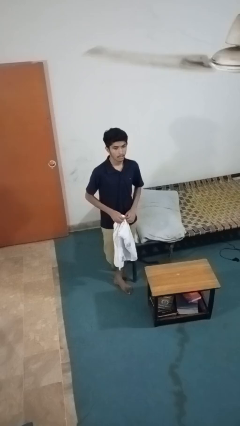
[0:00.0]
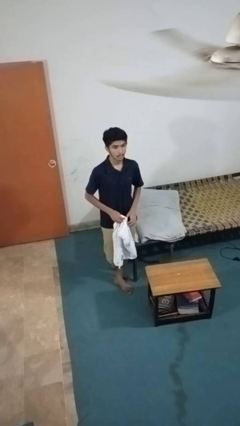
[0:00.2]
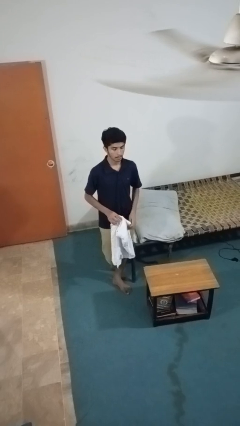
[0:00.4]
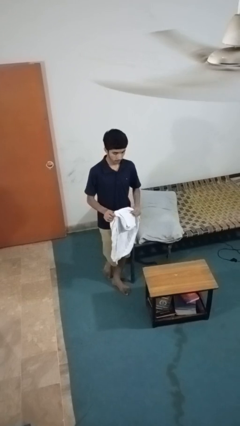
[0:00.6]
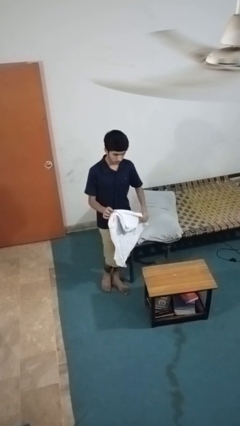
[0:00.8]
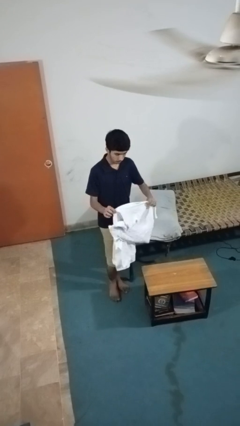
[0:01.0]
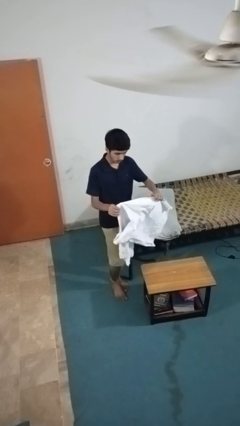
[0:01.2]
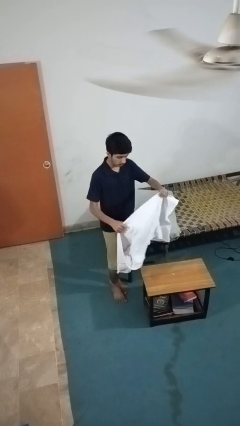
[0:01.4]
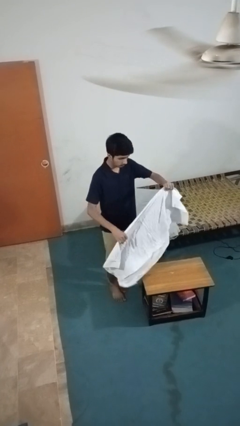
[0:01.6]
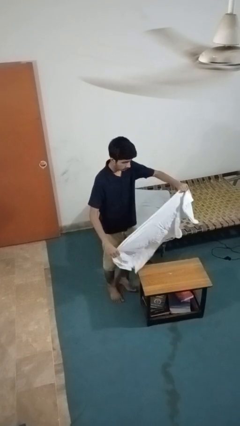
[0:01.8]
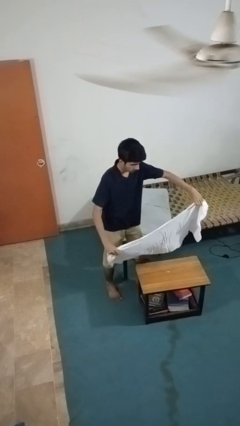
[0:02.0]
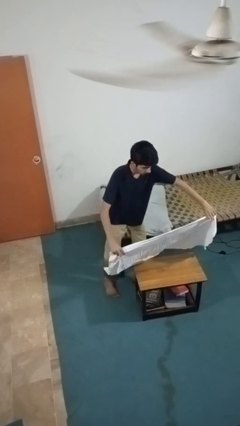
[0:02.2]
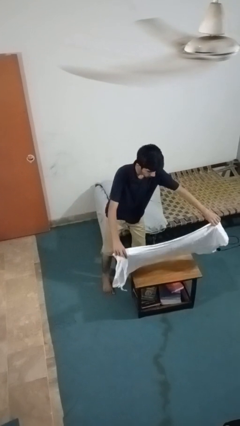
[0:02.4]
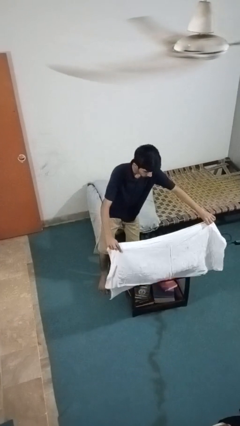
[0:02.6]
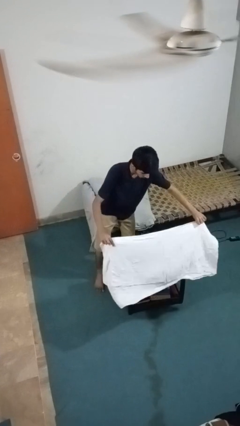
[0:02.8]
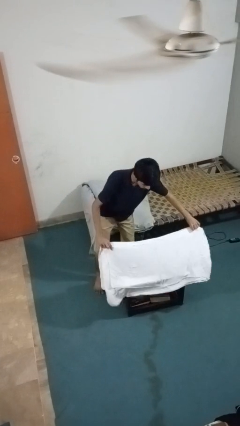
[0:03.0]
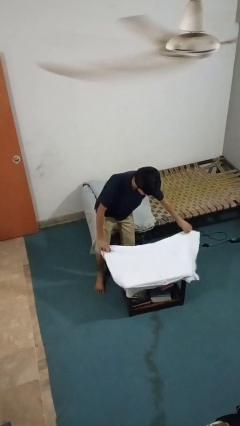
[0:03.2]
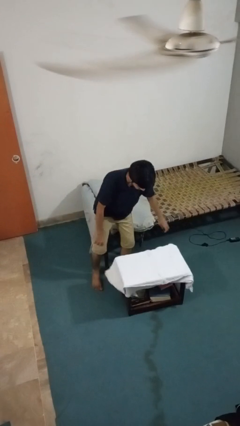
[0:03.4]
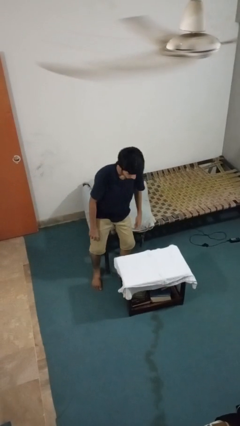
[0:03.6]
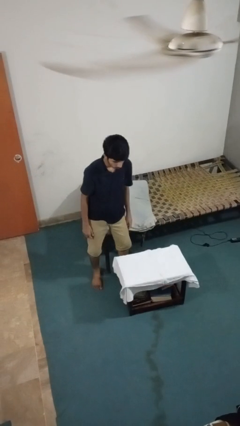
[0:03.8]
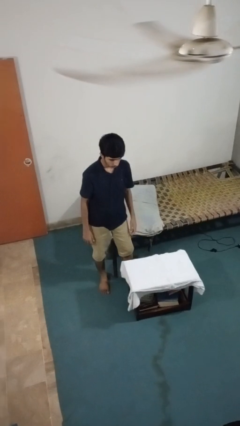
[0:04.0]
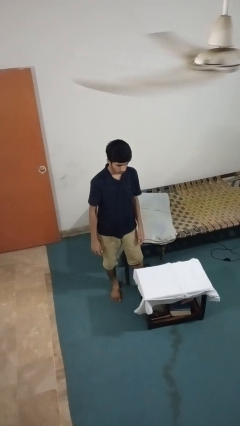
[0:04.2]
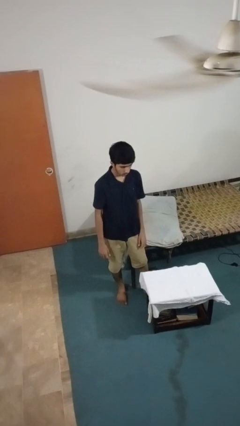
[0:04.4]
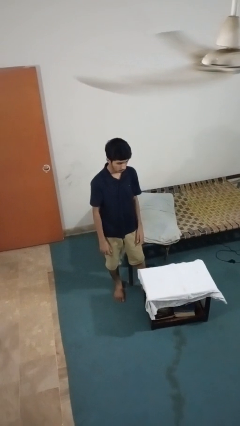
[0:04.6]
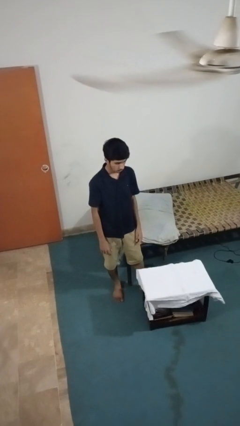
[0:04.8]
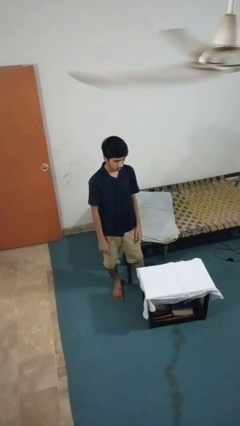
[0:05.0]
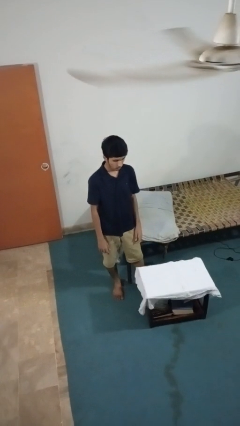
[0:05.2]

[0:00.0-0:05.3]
person spreads tablecloth

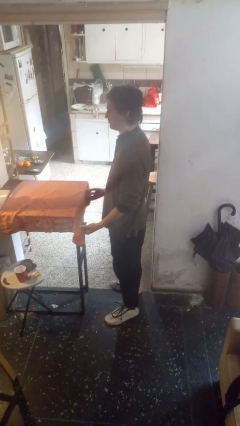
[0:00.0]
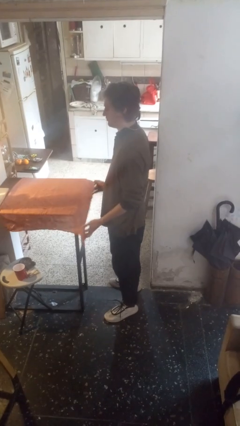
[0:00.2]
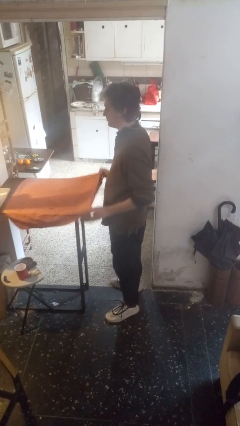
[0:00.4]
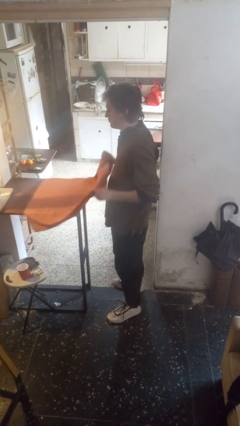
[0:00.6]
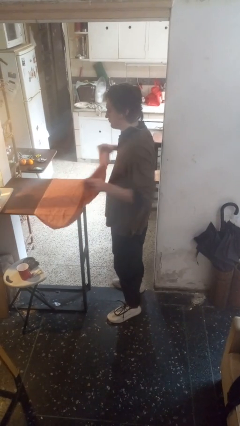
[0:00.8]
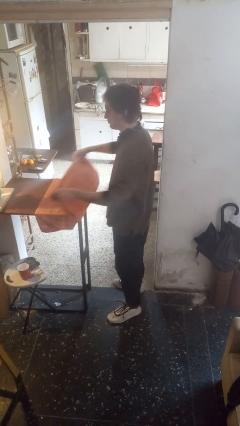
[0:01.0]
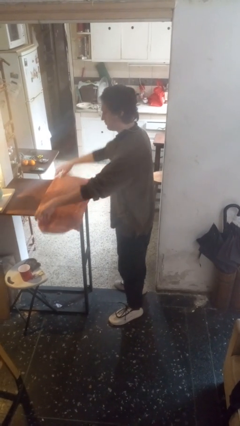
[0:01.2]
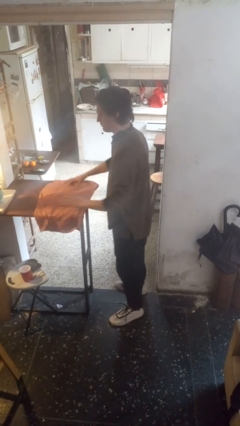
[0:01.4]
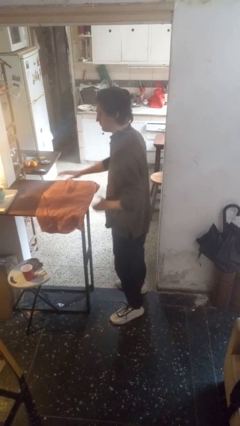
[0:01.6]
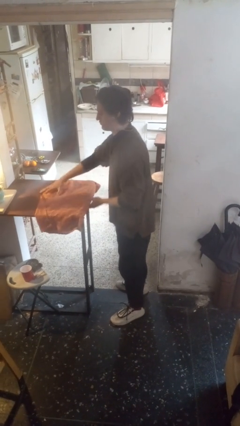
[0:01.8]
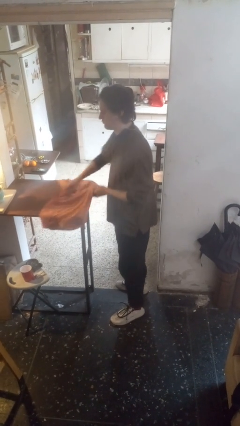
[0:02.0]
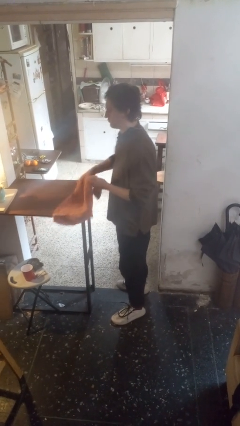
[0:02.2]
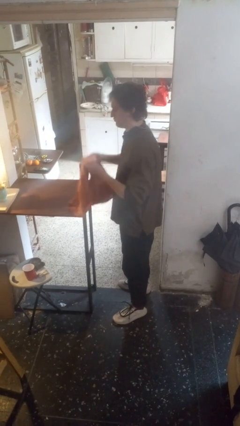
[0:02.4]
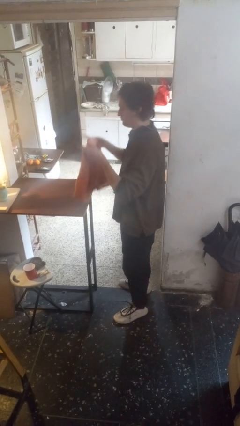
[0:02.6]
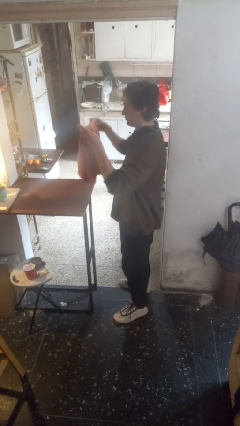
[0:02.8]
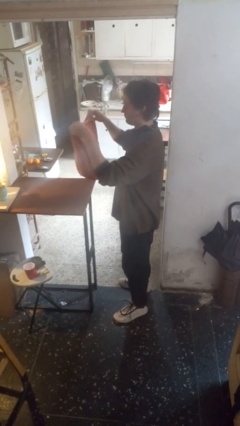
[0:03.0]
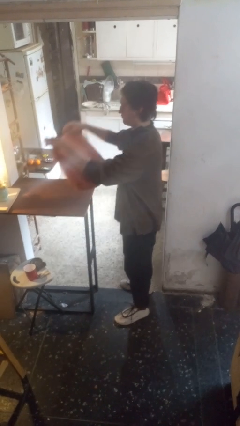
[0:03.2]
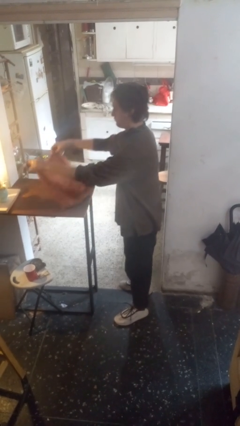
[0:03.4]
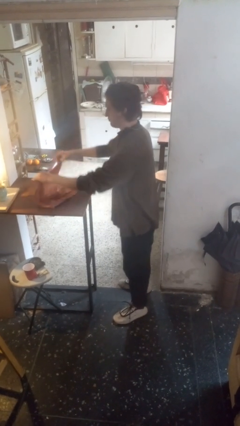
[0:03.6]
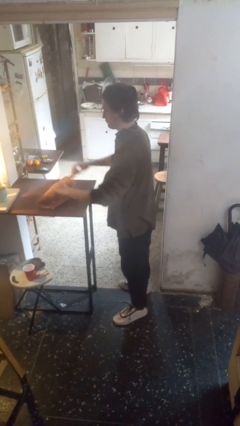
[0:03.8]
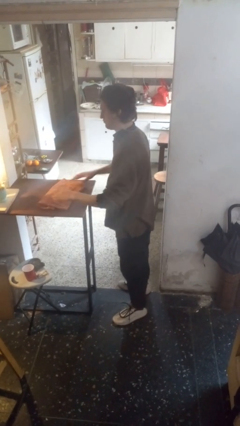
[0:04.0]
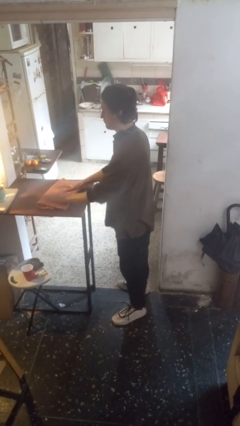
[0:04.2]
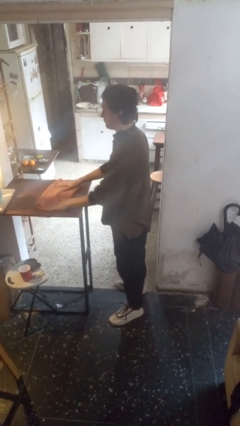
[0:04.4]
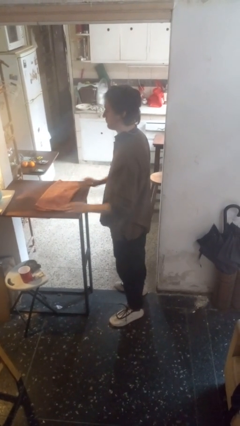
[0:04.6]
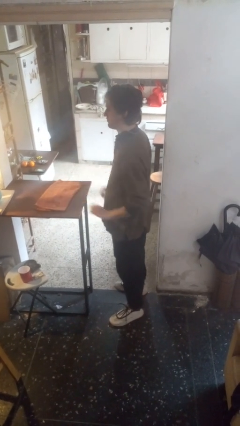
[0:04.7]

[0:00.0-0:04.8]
person folds tablecloth

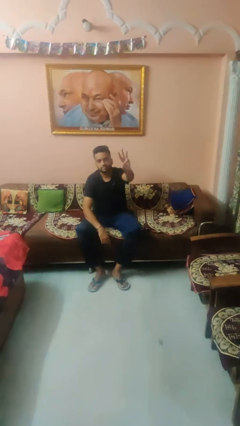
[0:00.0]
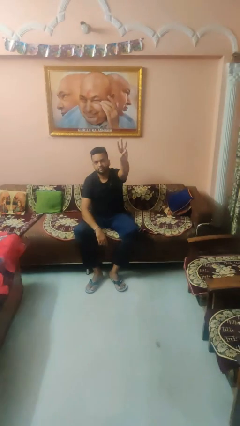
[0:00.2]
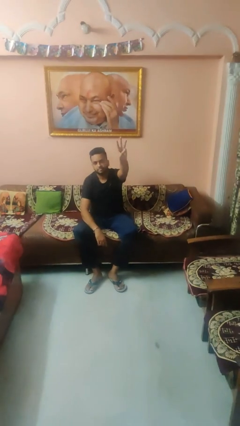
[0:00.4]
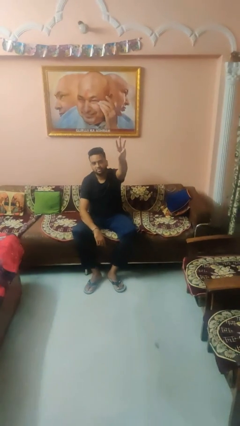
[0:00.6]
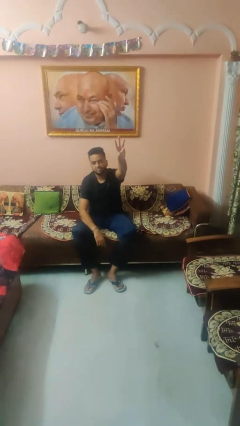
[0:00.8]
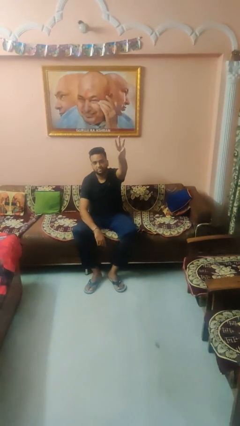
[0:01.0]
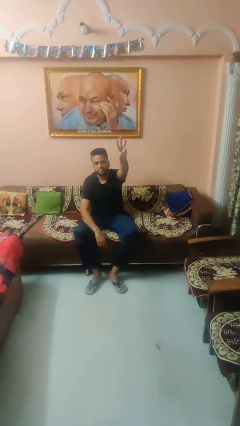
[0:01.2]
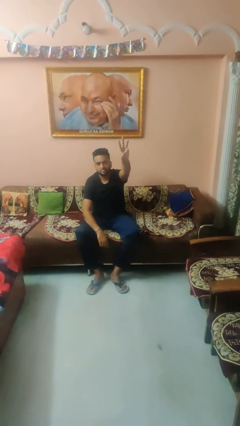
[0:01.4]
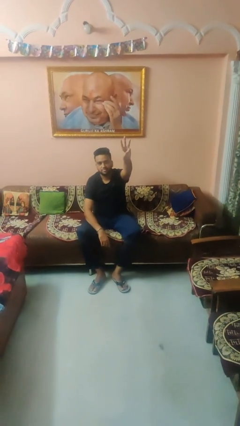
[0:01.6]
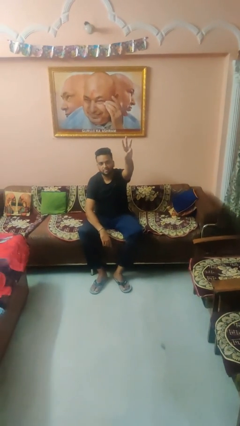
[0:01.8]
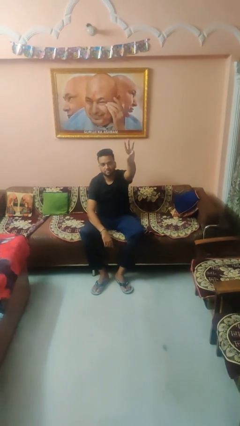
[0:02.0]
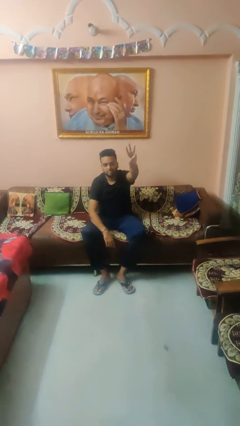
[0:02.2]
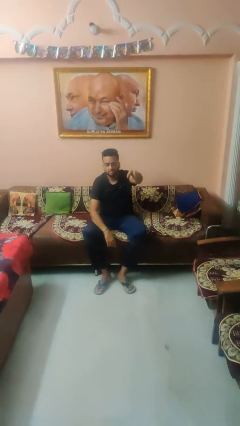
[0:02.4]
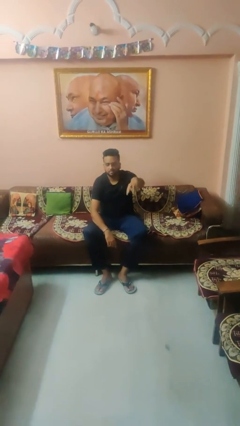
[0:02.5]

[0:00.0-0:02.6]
person gestures number three

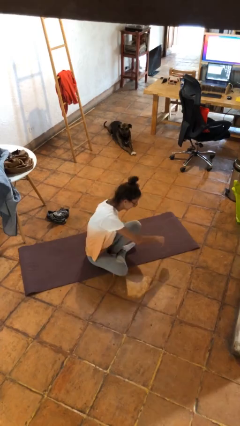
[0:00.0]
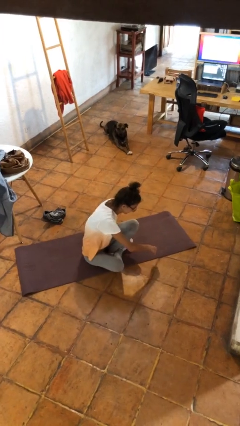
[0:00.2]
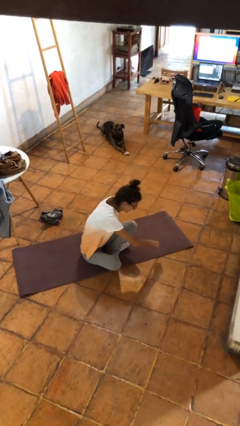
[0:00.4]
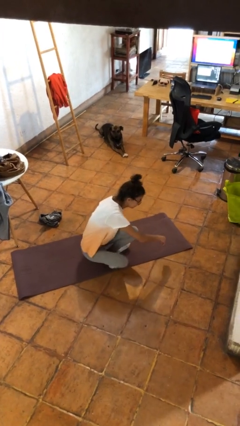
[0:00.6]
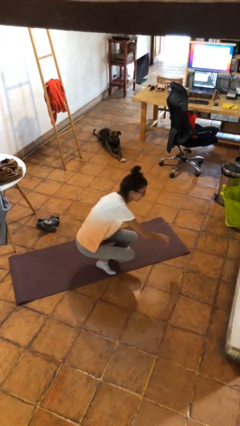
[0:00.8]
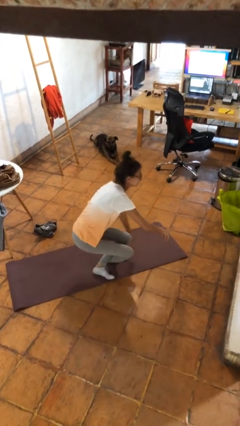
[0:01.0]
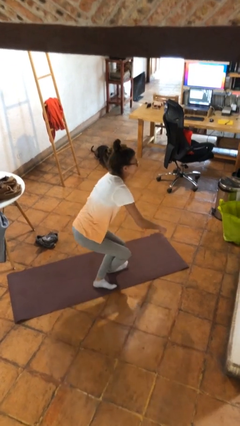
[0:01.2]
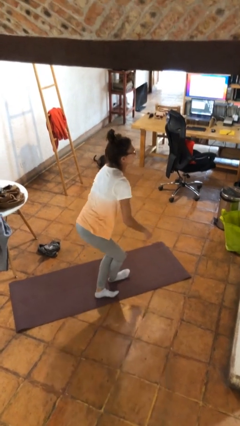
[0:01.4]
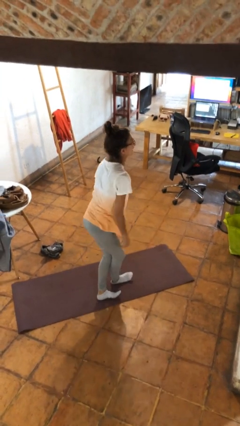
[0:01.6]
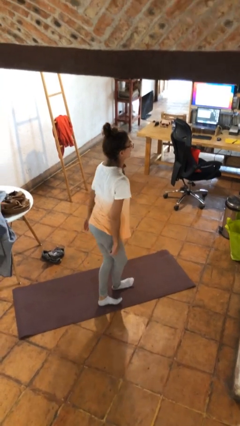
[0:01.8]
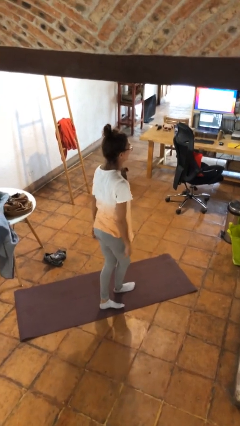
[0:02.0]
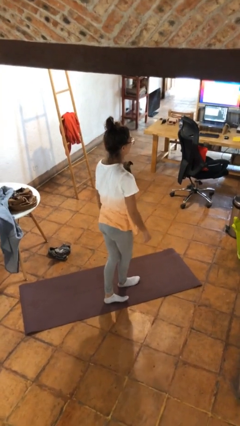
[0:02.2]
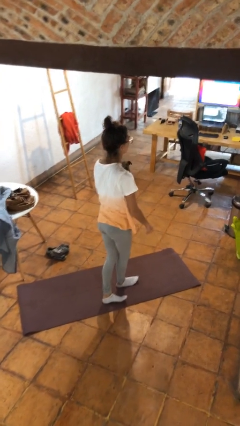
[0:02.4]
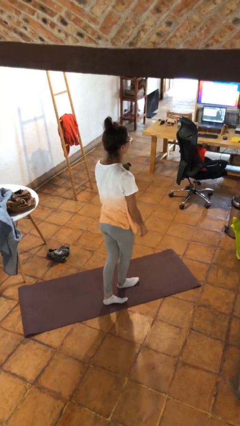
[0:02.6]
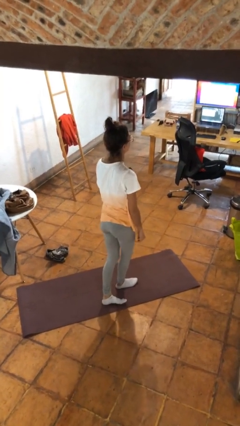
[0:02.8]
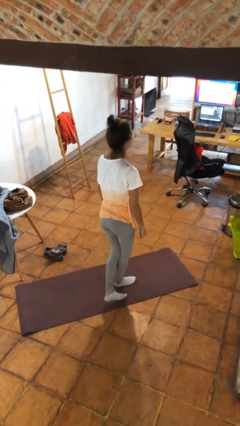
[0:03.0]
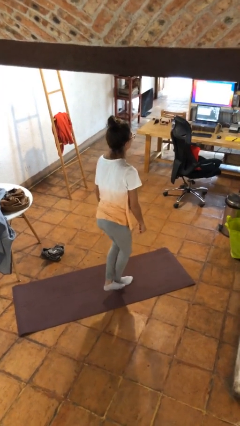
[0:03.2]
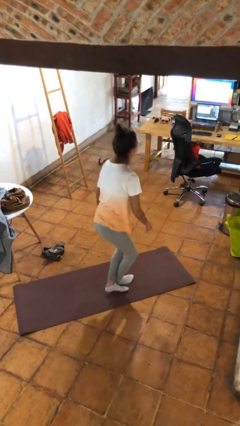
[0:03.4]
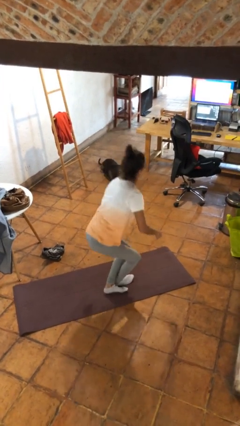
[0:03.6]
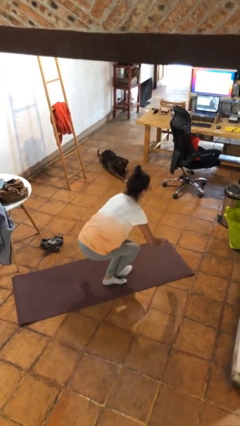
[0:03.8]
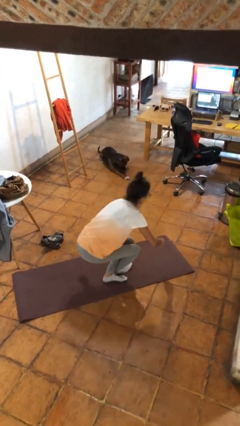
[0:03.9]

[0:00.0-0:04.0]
person stands up from floor

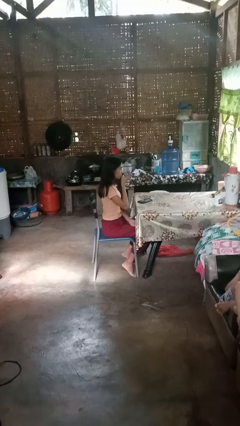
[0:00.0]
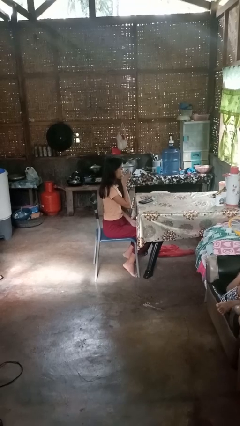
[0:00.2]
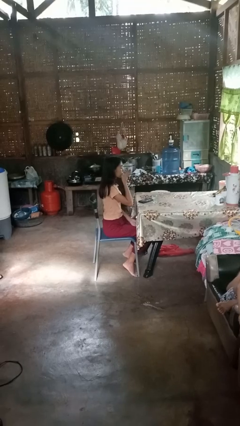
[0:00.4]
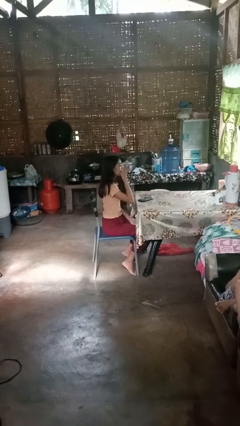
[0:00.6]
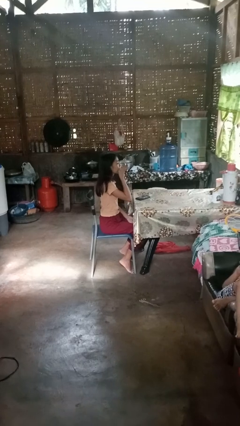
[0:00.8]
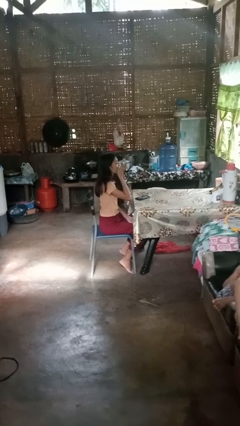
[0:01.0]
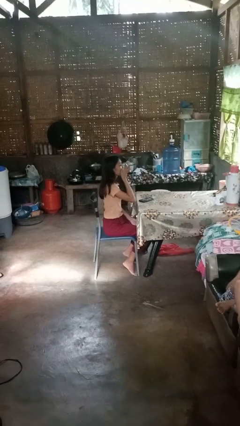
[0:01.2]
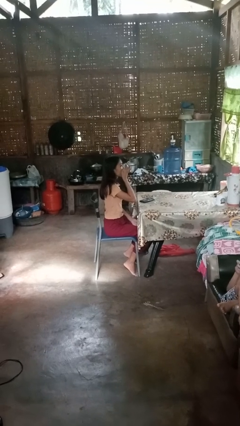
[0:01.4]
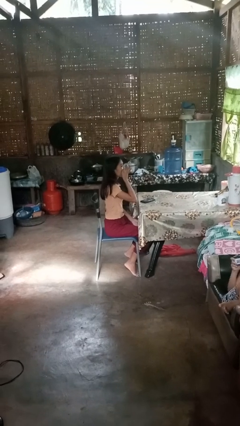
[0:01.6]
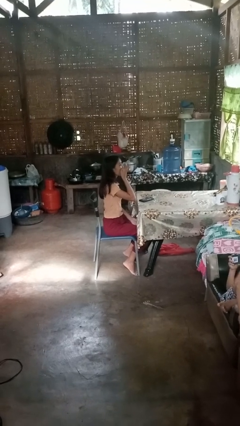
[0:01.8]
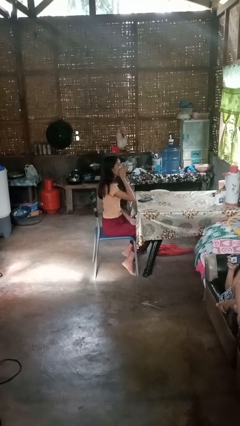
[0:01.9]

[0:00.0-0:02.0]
person drinks from shotglass
